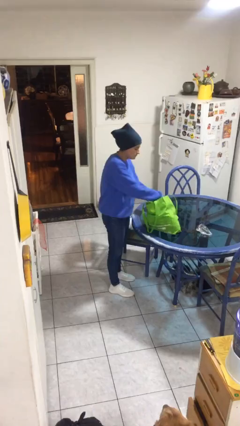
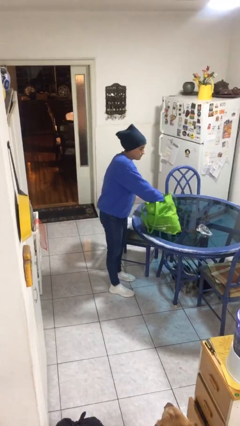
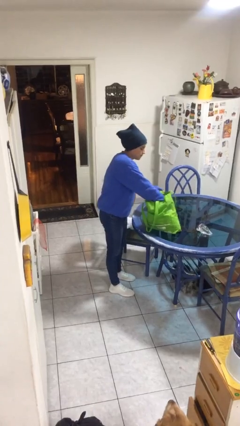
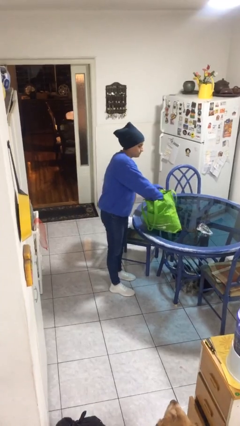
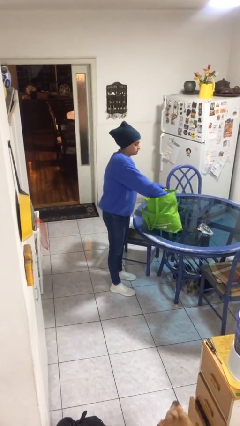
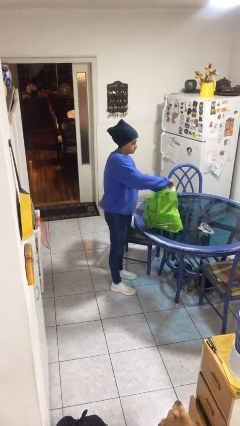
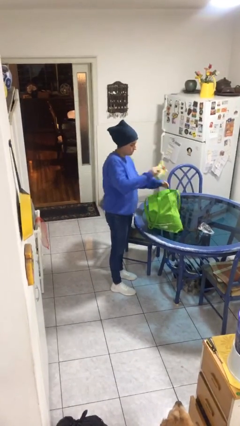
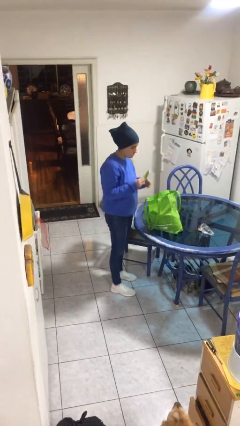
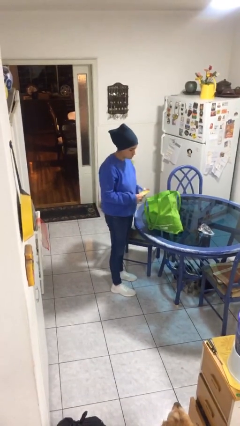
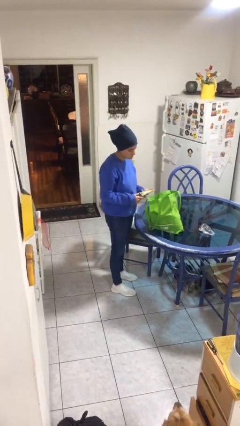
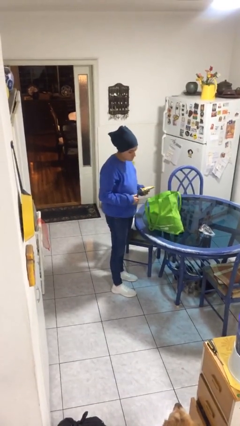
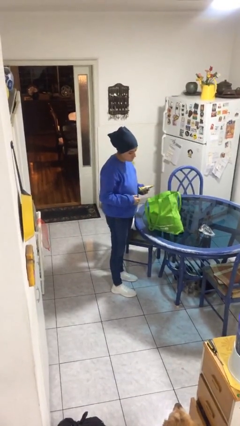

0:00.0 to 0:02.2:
person takes object from bag

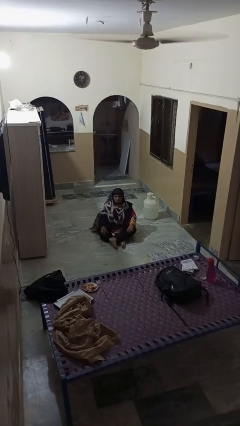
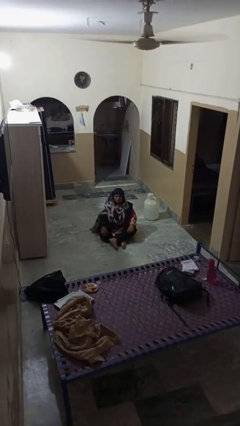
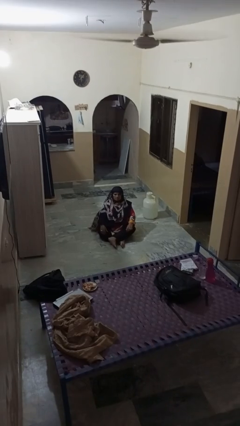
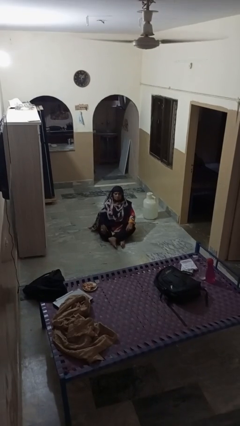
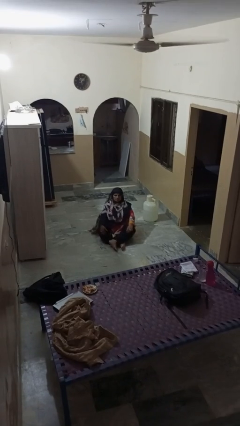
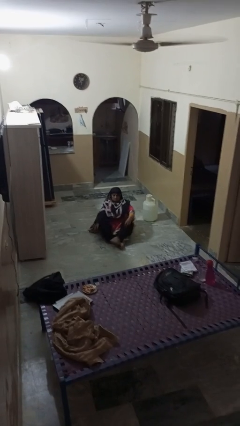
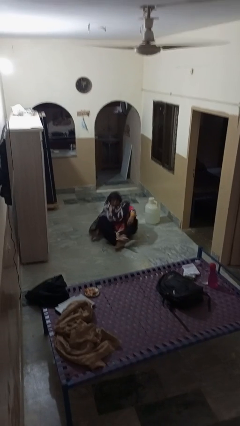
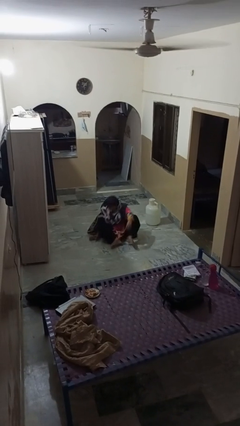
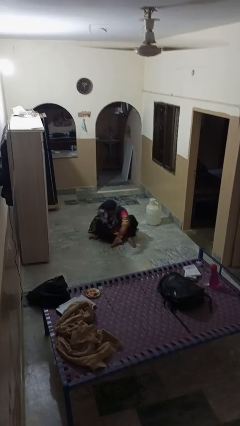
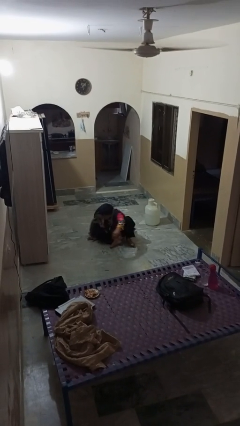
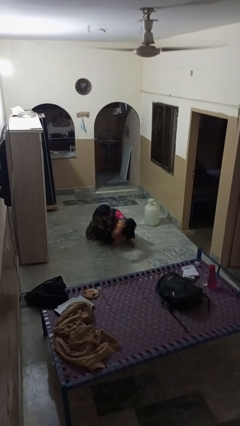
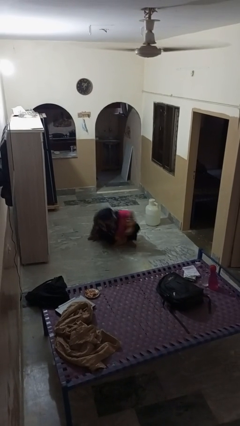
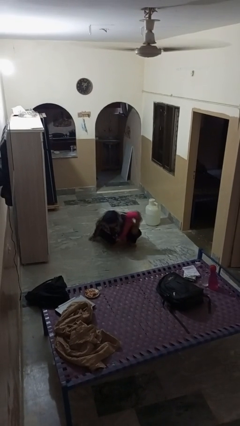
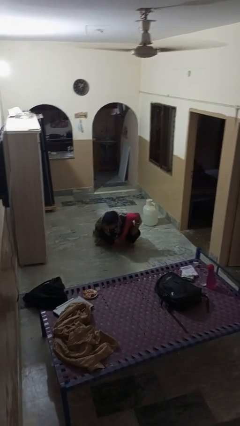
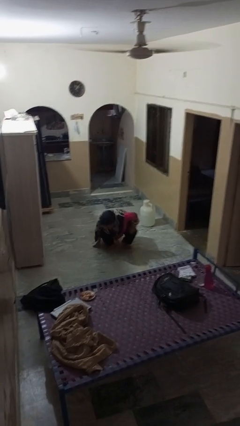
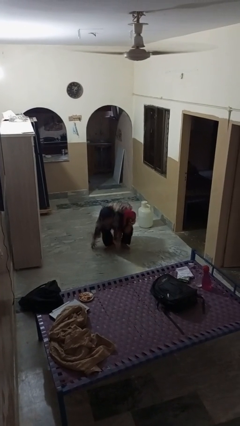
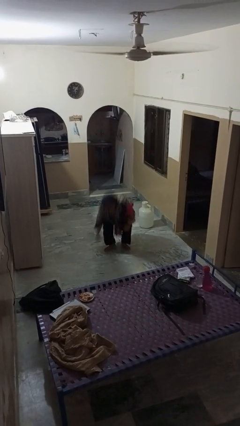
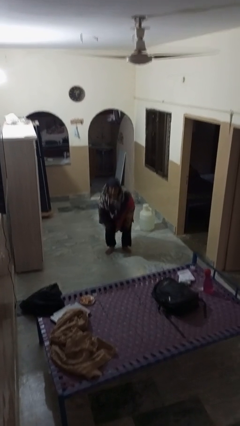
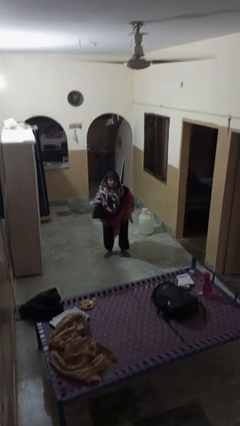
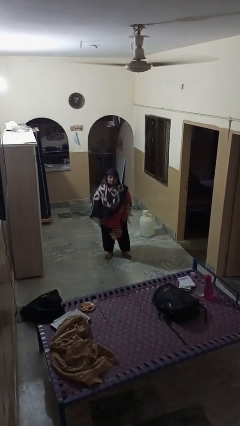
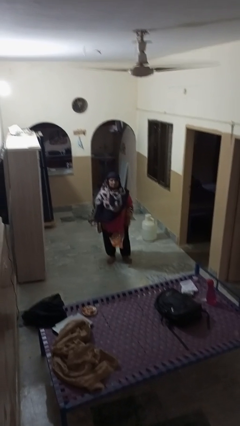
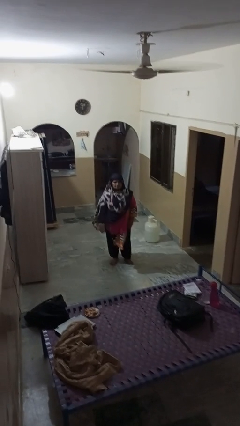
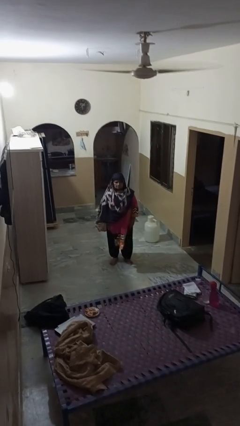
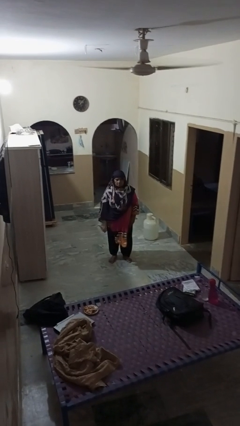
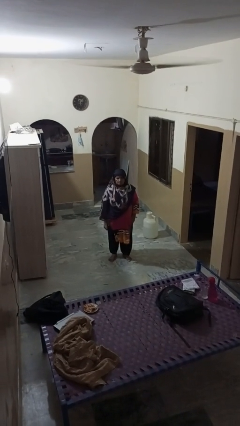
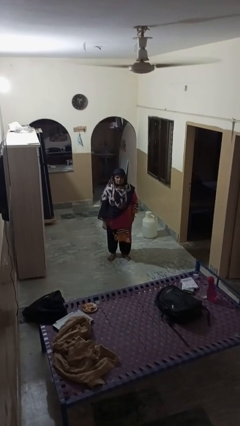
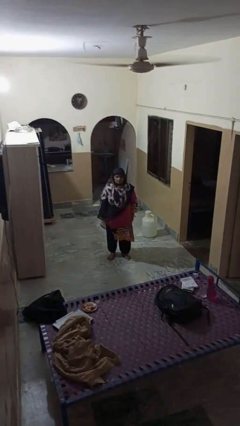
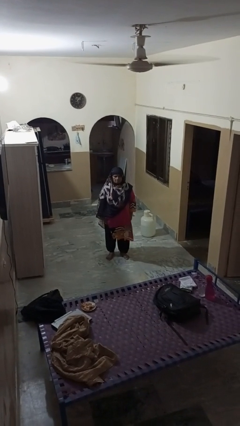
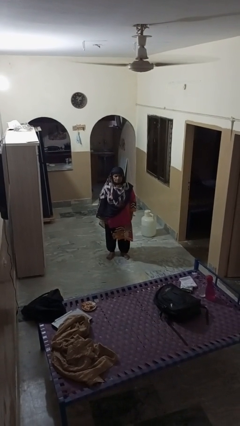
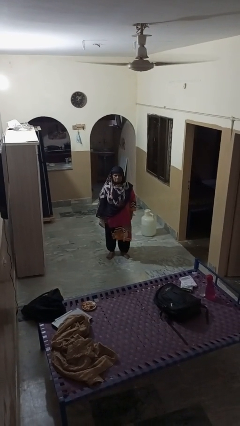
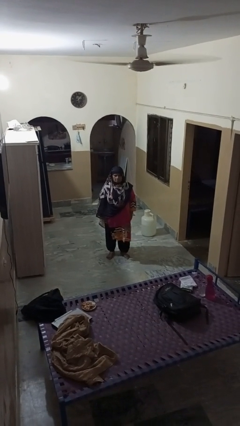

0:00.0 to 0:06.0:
person stands up from floor

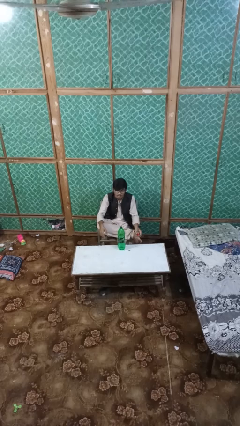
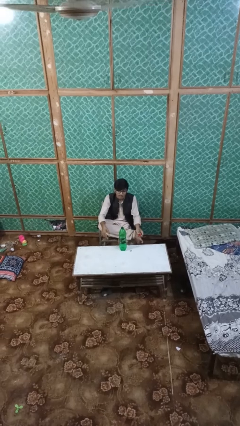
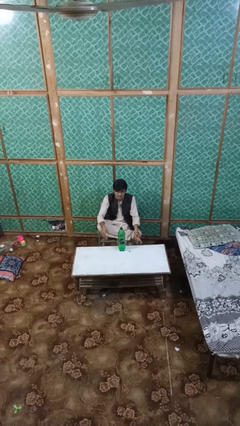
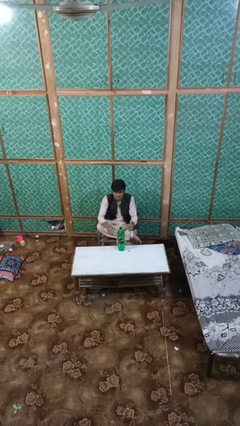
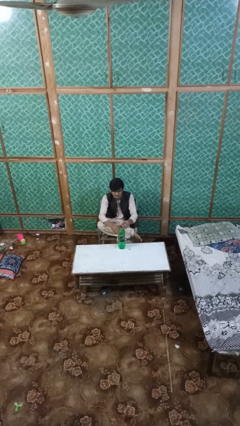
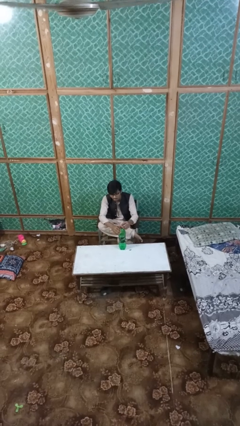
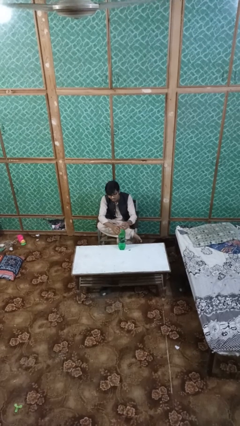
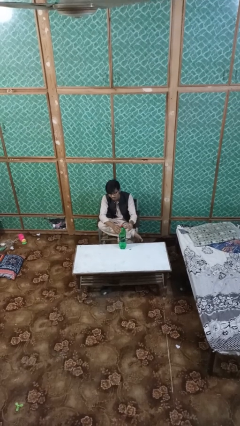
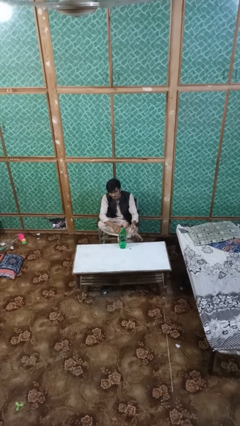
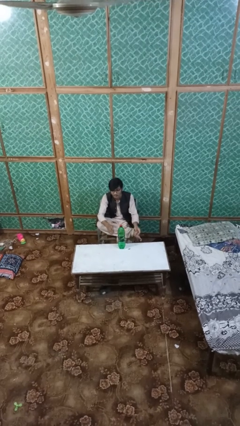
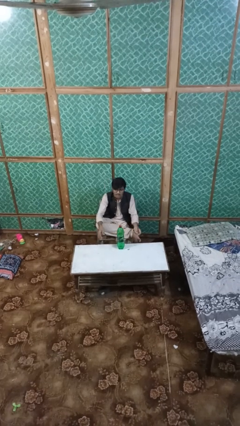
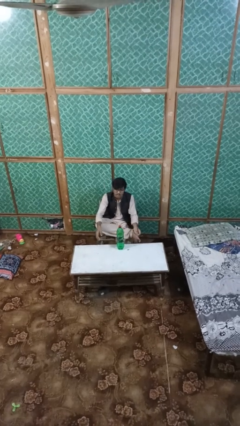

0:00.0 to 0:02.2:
person screws lid to bottle

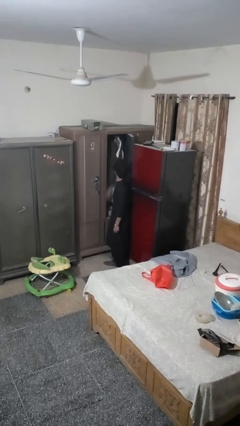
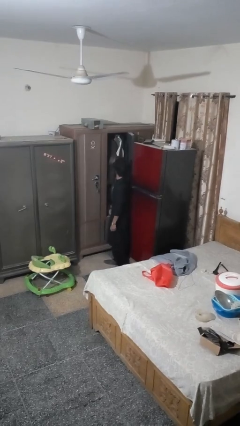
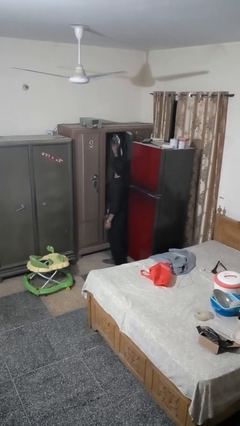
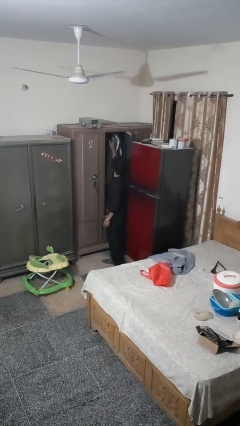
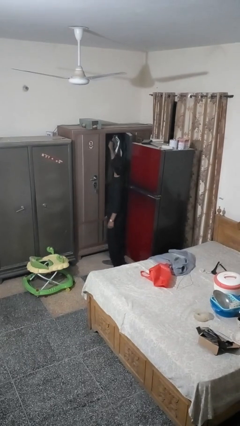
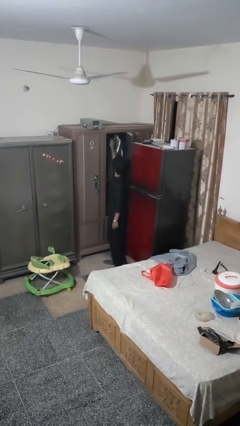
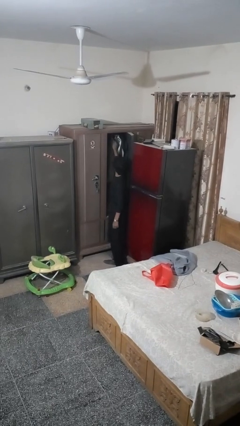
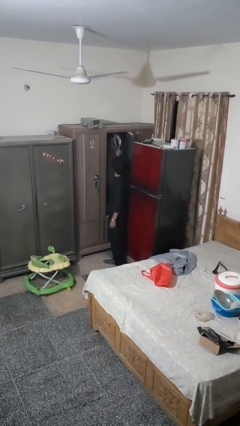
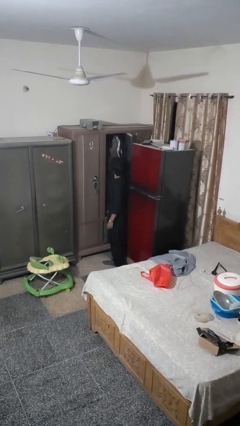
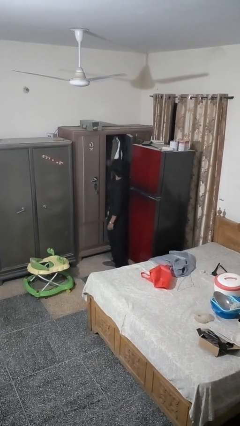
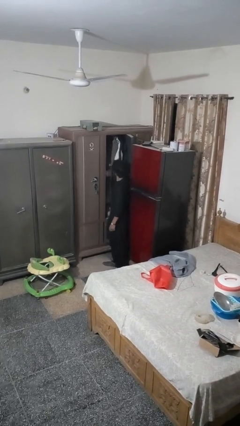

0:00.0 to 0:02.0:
person takes clothes from closet

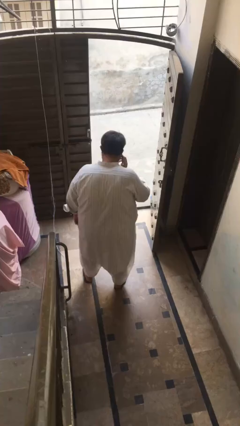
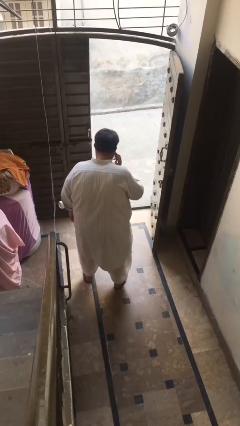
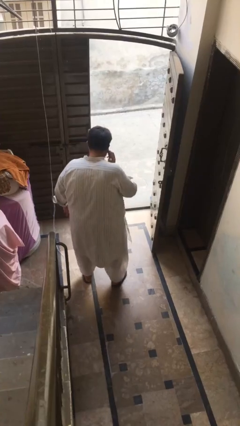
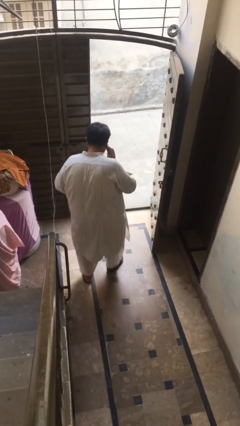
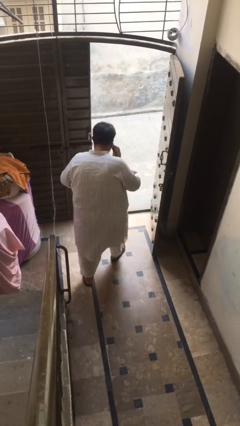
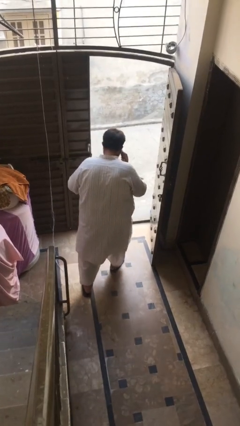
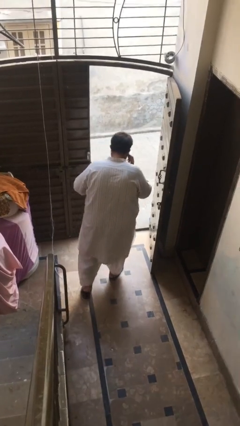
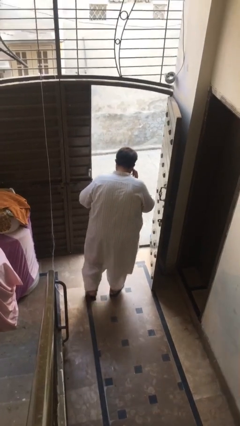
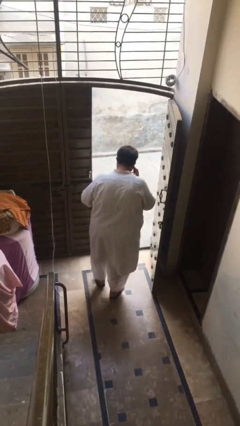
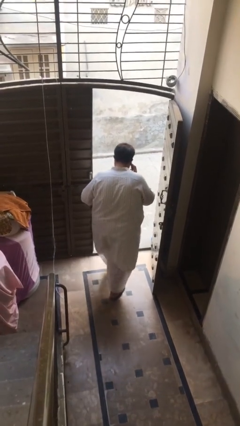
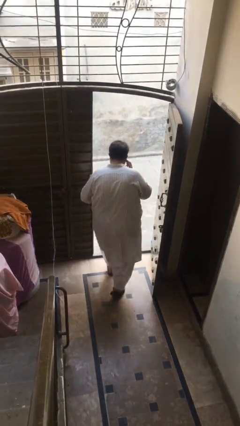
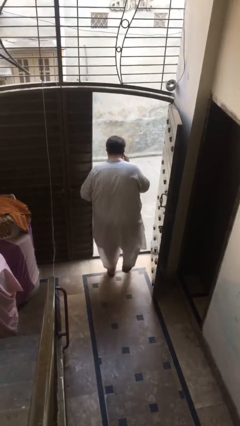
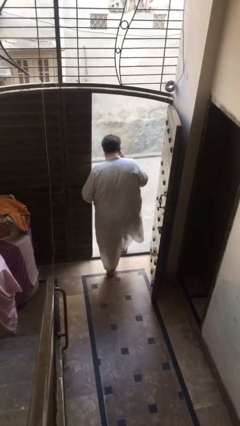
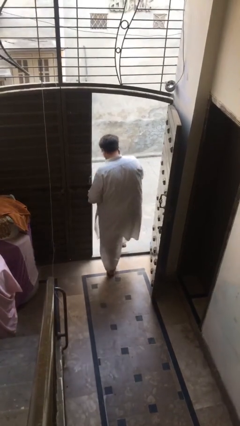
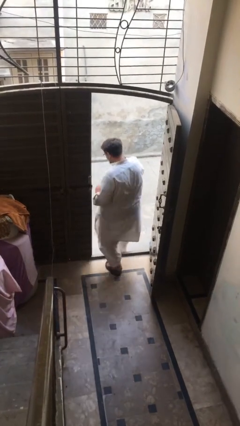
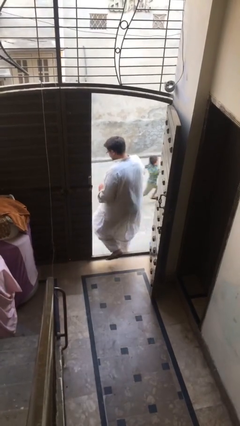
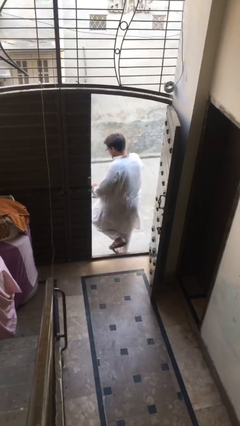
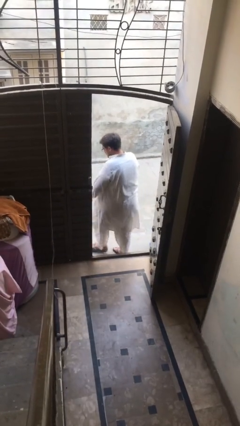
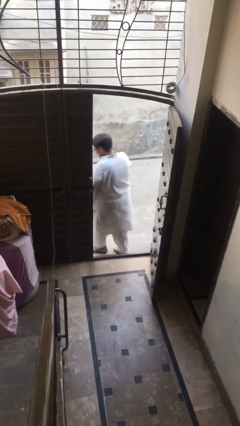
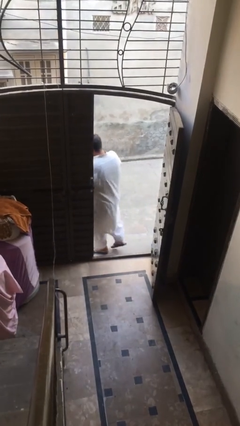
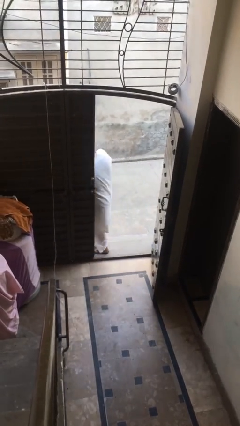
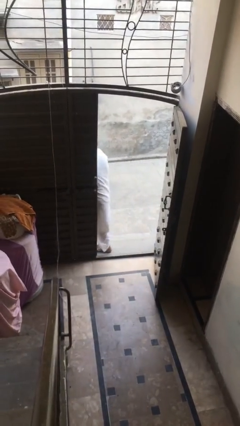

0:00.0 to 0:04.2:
person exits scene through structure

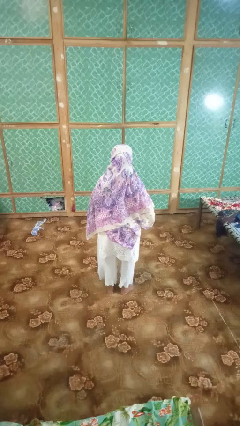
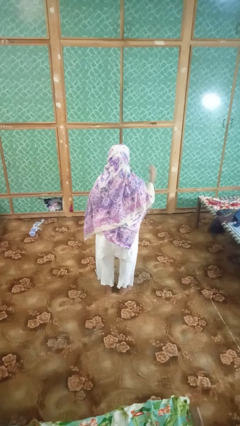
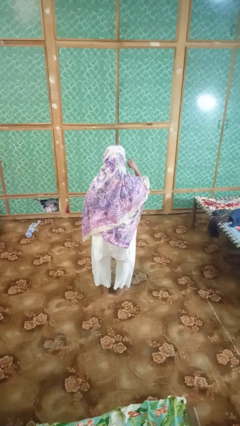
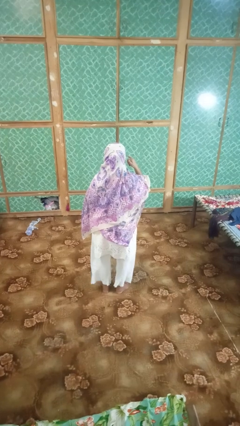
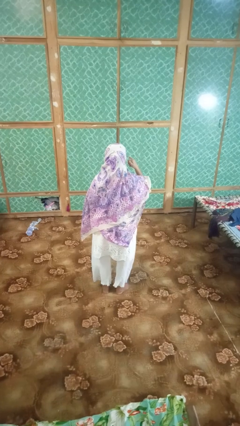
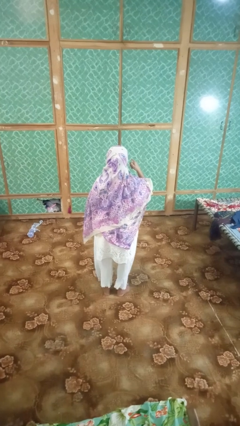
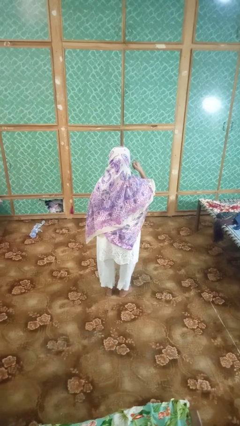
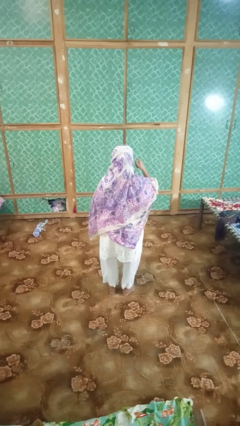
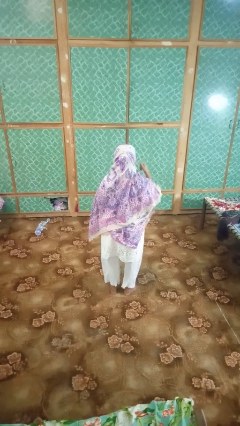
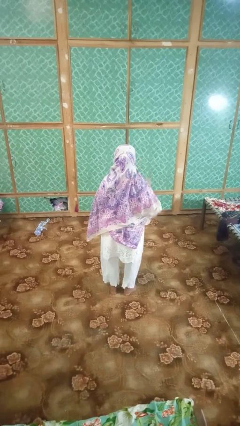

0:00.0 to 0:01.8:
person gestures call me
